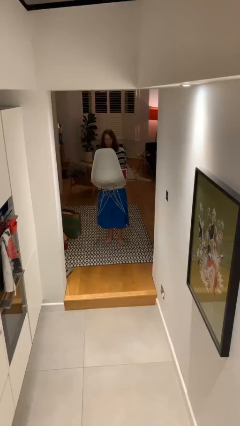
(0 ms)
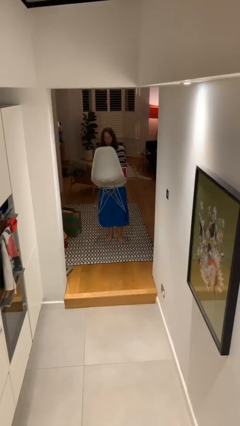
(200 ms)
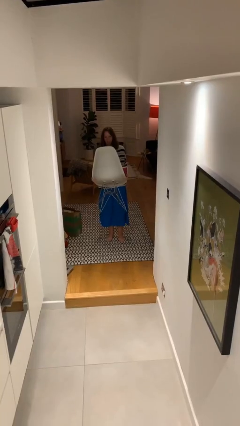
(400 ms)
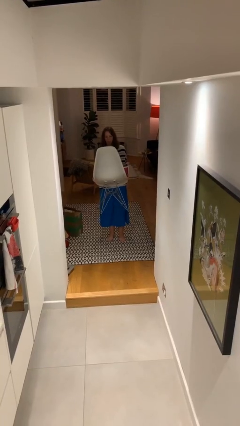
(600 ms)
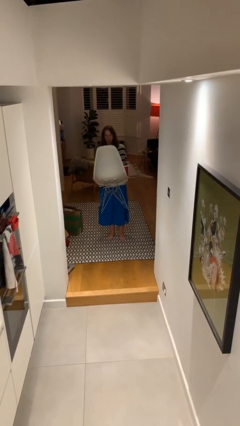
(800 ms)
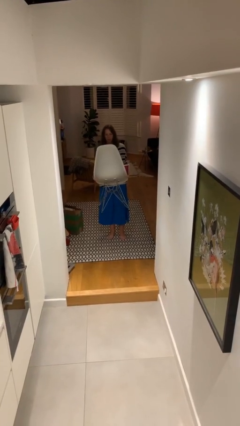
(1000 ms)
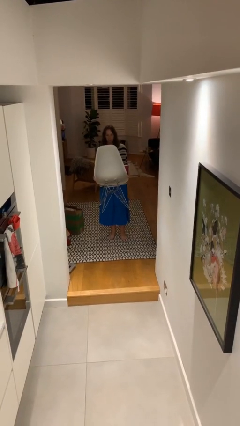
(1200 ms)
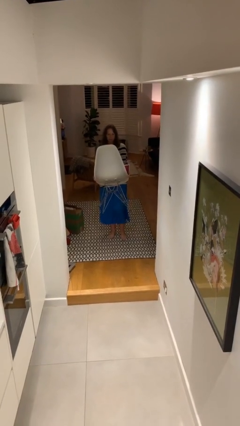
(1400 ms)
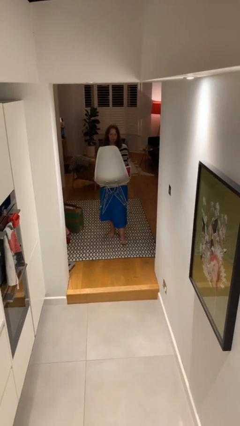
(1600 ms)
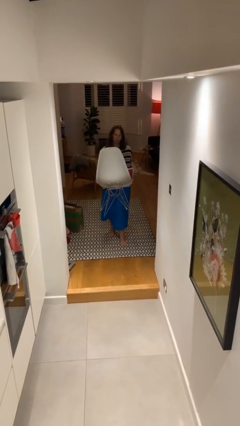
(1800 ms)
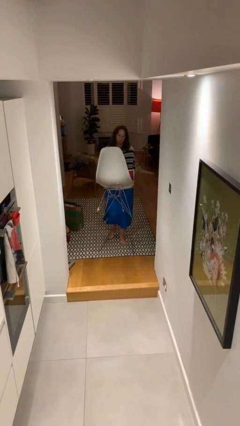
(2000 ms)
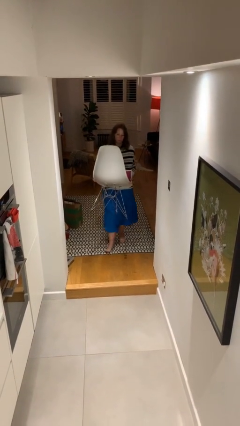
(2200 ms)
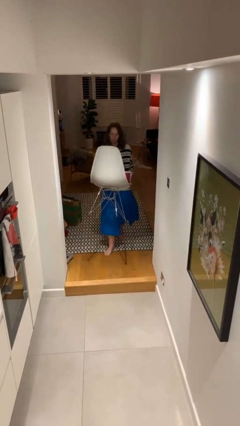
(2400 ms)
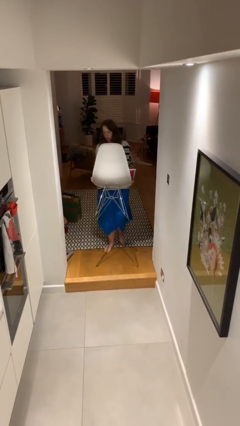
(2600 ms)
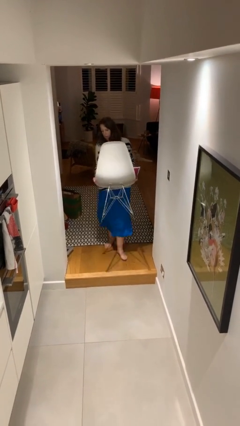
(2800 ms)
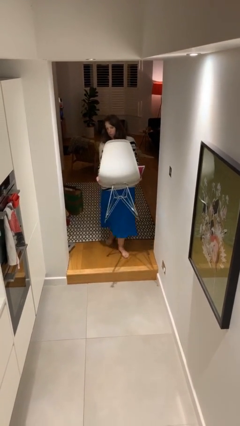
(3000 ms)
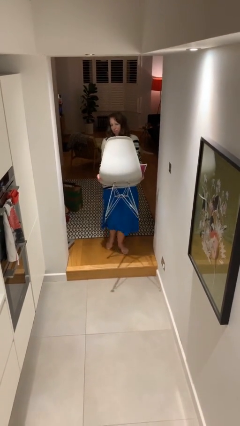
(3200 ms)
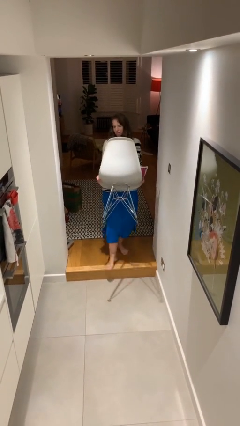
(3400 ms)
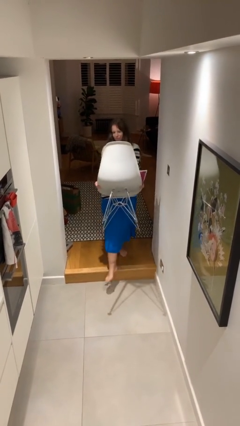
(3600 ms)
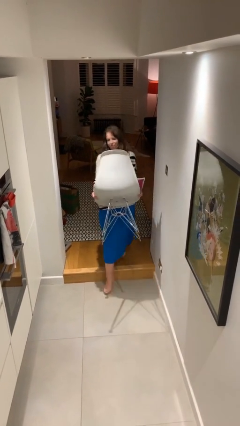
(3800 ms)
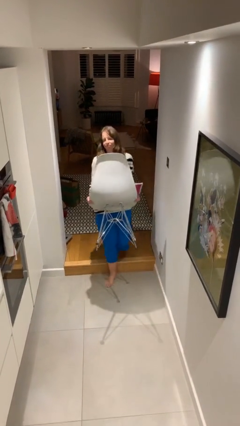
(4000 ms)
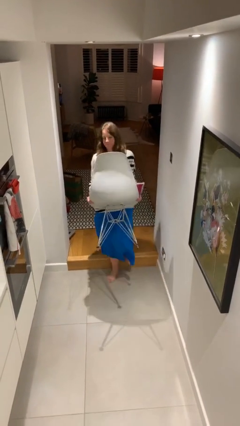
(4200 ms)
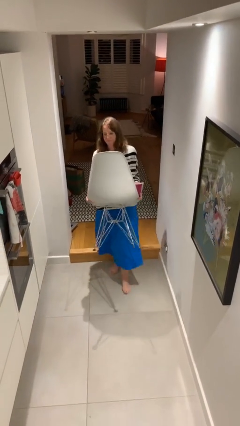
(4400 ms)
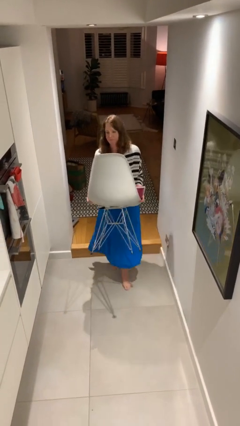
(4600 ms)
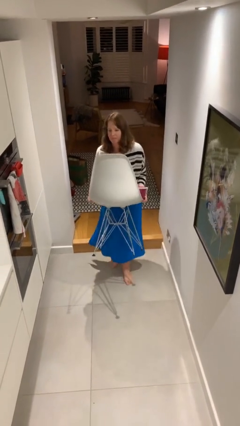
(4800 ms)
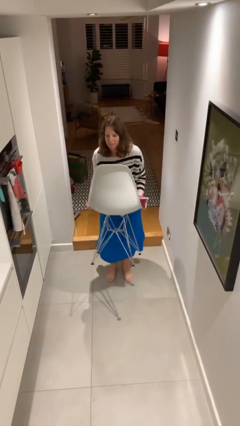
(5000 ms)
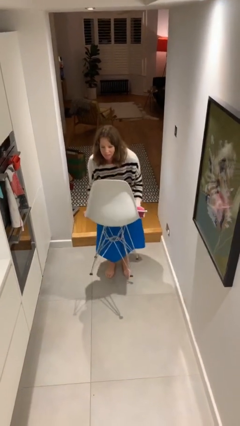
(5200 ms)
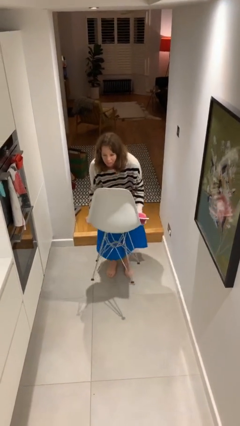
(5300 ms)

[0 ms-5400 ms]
person carries heavy object

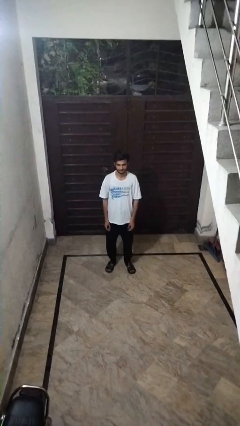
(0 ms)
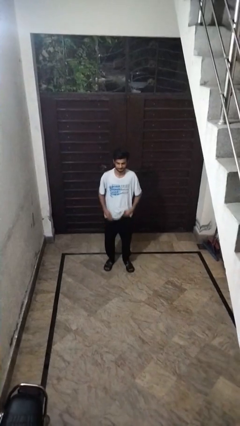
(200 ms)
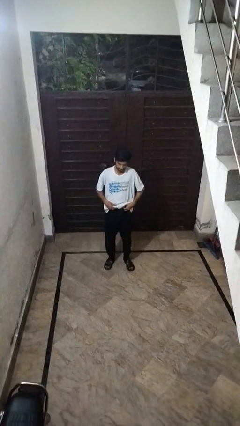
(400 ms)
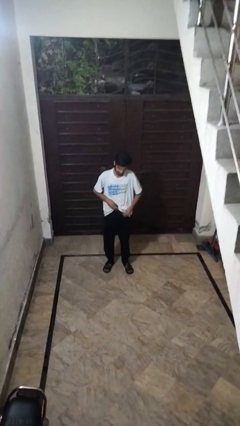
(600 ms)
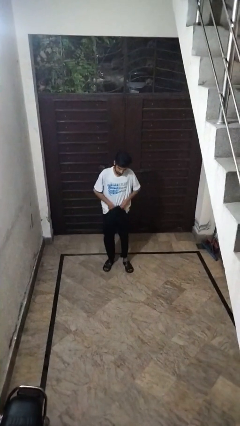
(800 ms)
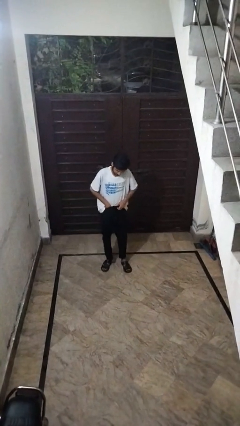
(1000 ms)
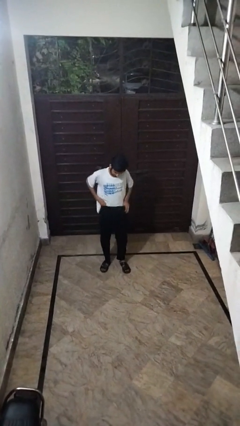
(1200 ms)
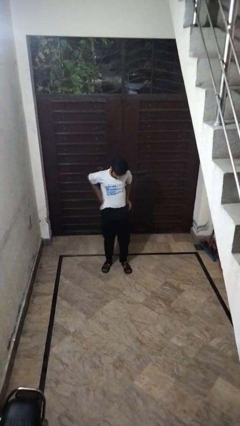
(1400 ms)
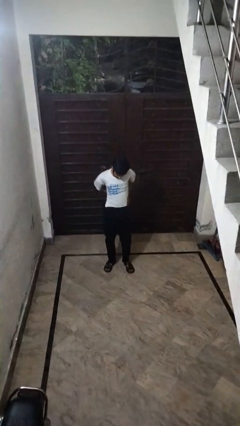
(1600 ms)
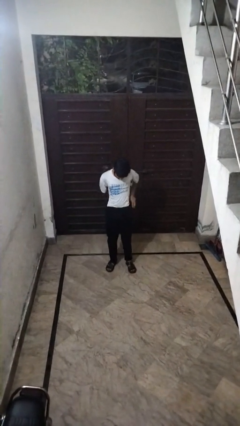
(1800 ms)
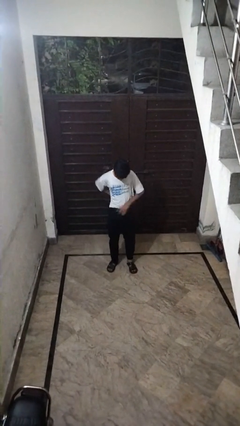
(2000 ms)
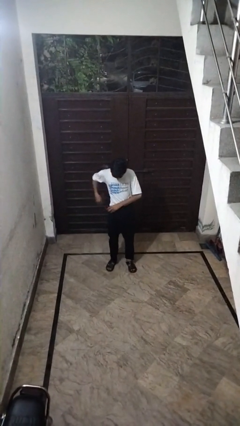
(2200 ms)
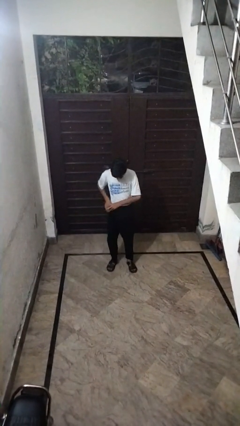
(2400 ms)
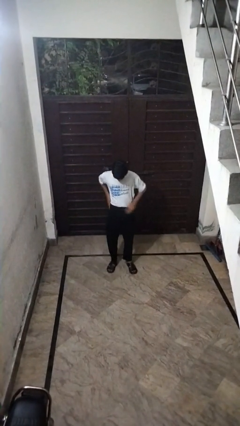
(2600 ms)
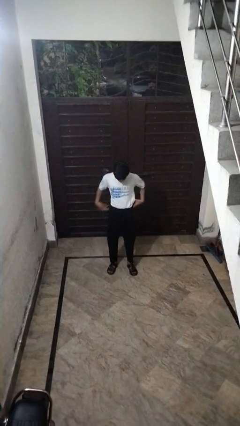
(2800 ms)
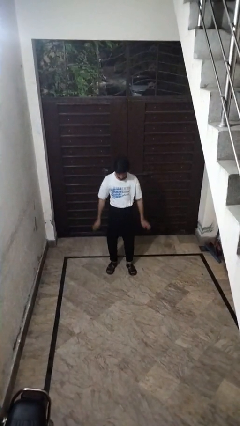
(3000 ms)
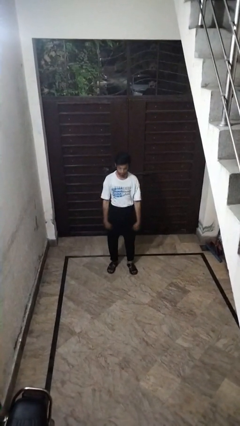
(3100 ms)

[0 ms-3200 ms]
person unlocks door with keys

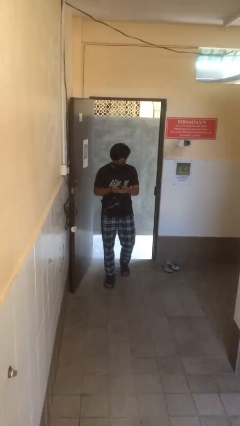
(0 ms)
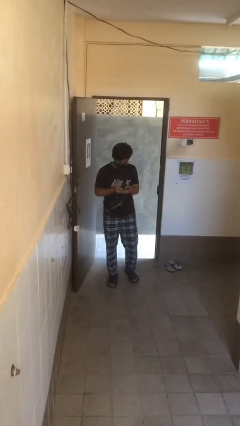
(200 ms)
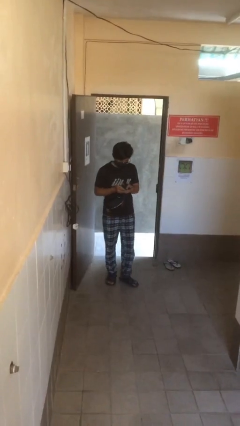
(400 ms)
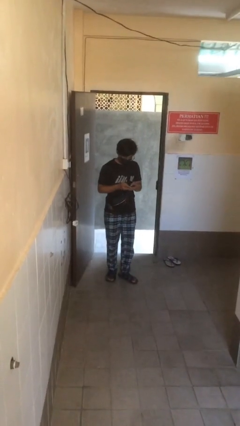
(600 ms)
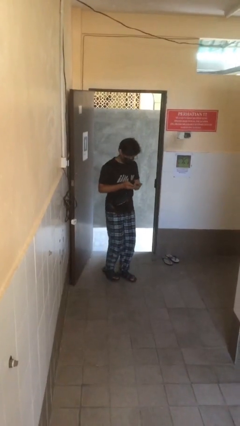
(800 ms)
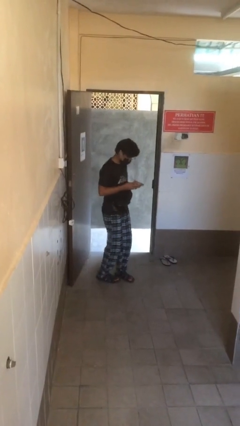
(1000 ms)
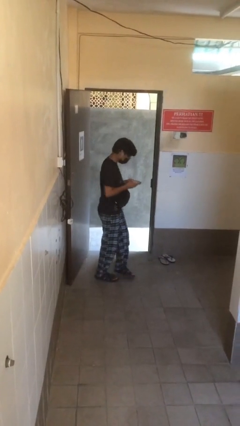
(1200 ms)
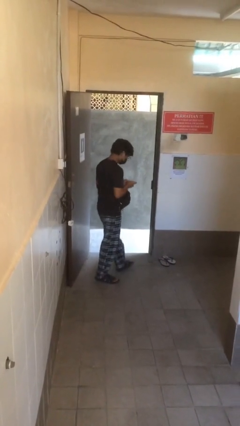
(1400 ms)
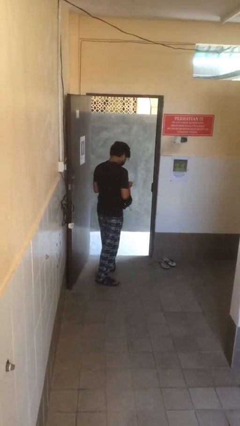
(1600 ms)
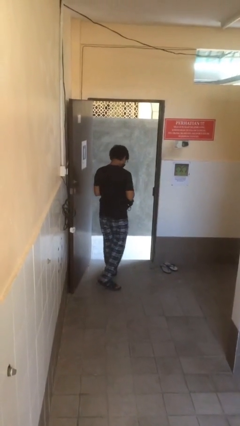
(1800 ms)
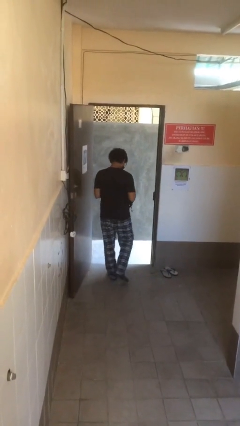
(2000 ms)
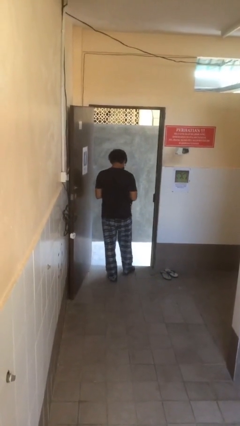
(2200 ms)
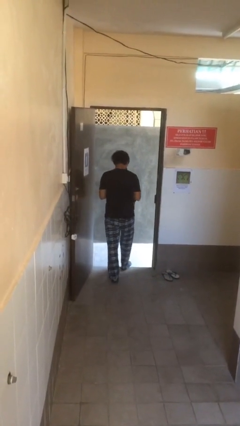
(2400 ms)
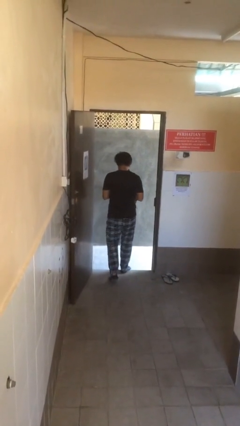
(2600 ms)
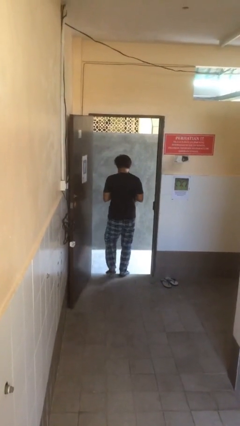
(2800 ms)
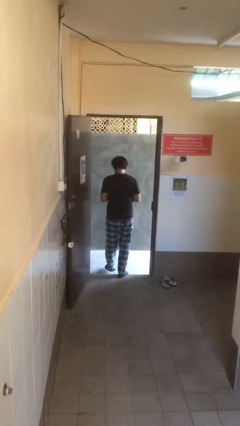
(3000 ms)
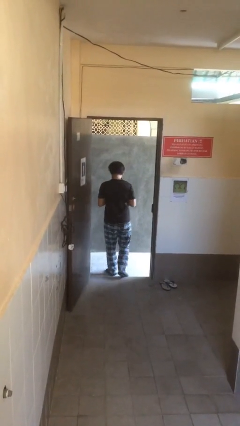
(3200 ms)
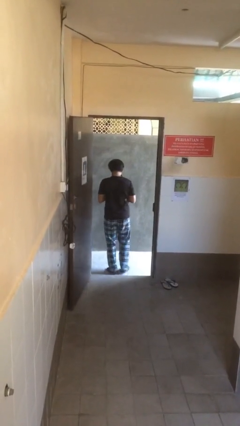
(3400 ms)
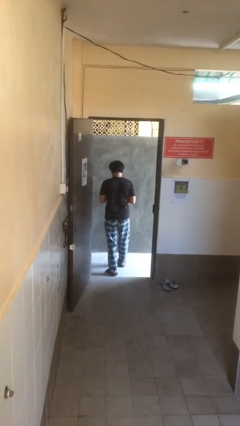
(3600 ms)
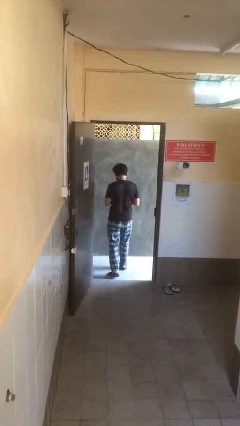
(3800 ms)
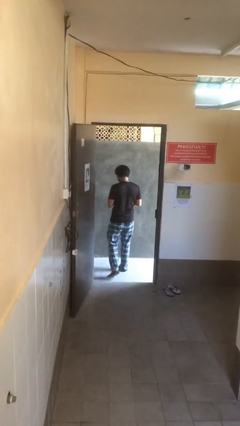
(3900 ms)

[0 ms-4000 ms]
person exits scene through structure

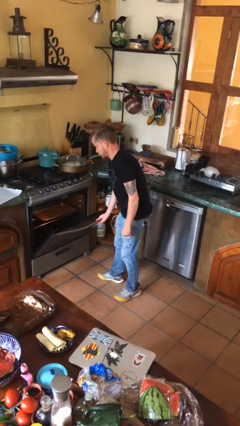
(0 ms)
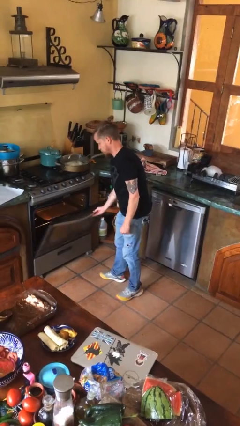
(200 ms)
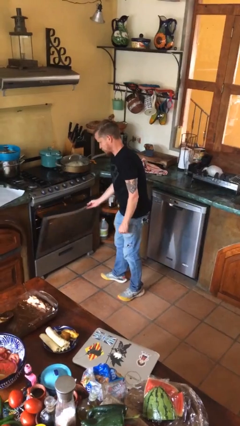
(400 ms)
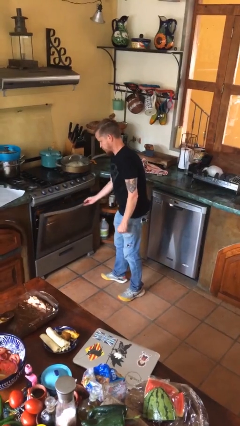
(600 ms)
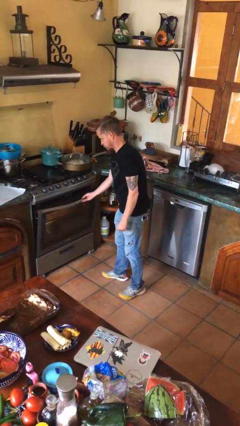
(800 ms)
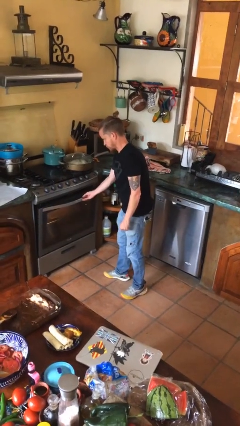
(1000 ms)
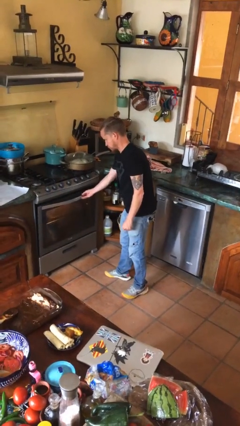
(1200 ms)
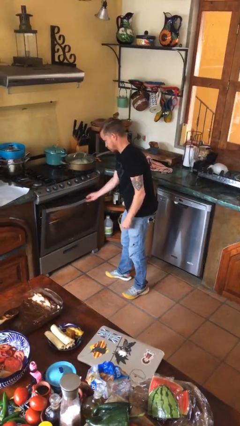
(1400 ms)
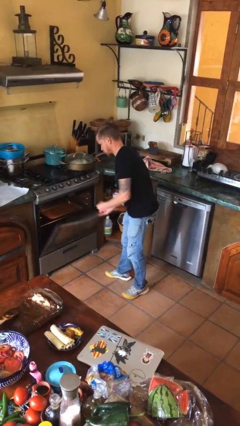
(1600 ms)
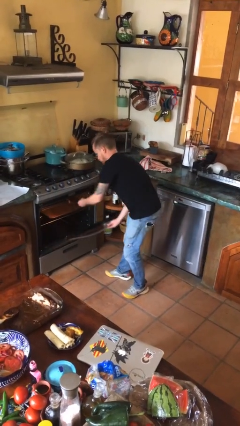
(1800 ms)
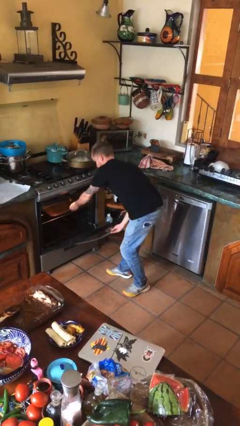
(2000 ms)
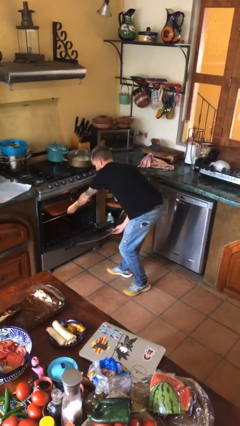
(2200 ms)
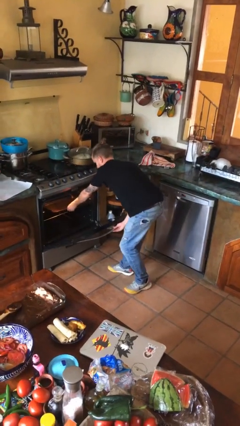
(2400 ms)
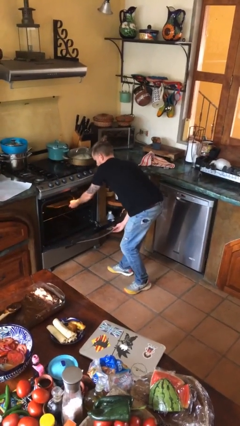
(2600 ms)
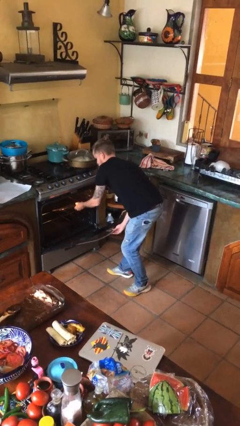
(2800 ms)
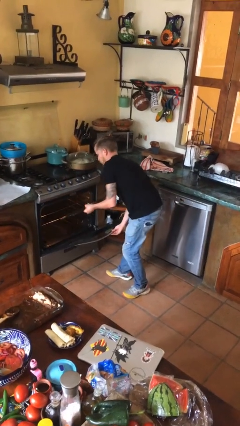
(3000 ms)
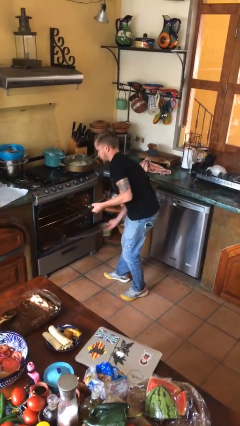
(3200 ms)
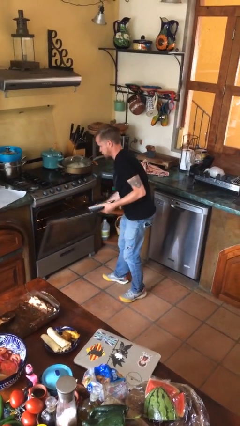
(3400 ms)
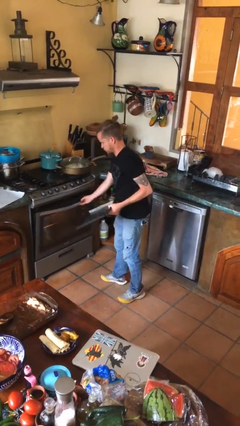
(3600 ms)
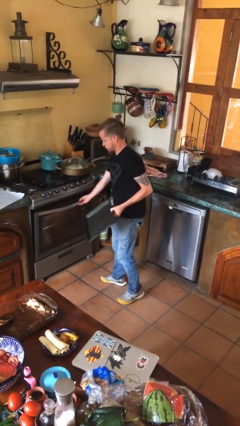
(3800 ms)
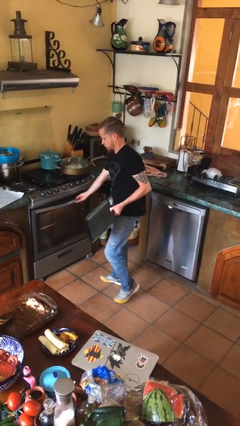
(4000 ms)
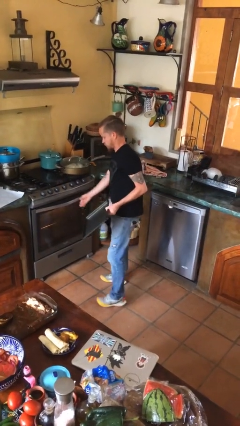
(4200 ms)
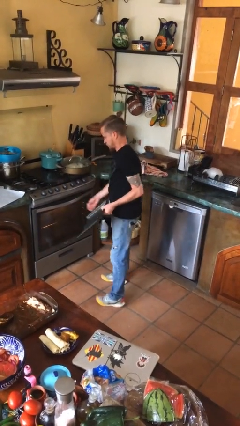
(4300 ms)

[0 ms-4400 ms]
person takes object from oven

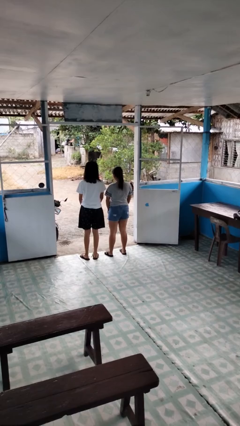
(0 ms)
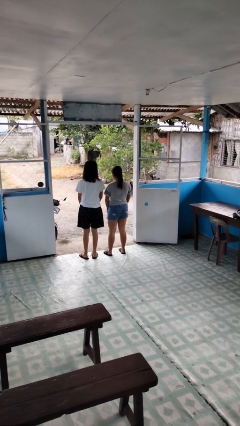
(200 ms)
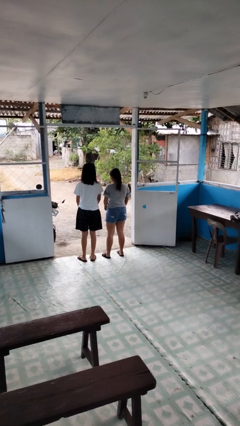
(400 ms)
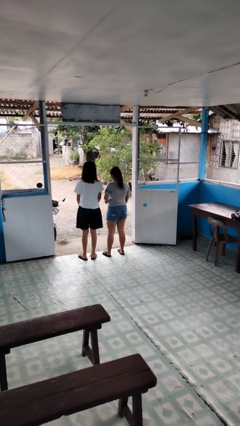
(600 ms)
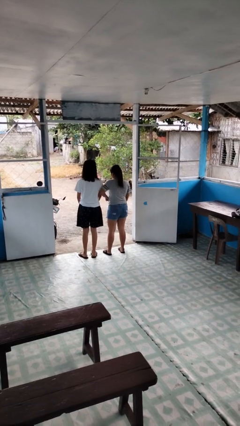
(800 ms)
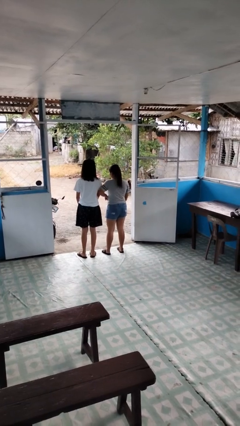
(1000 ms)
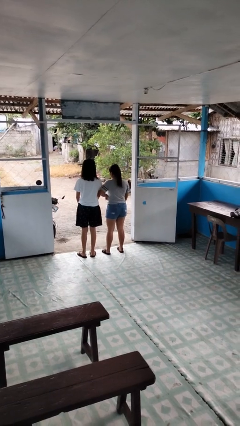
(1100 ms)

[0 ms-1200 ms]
person nudges person with elbow
